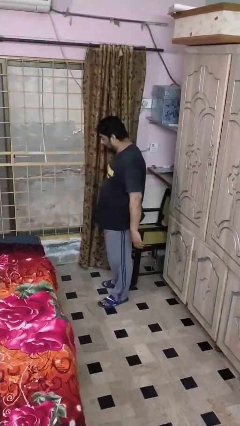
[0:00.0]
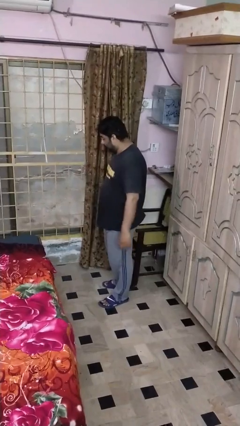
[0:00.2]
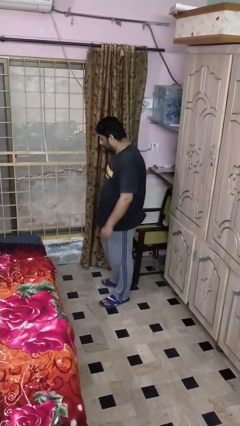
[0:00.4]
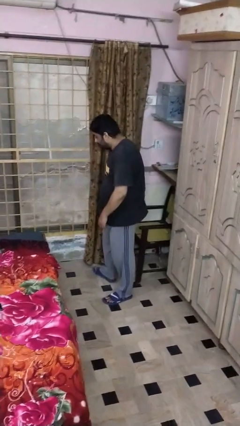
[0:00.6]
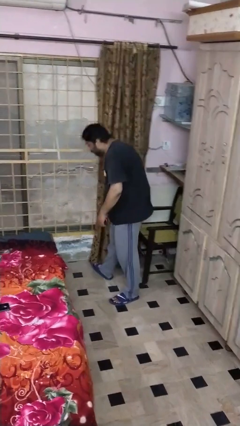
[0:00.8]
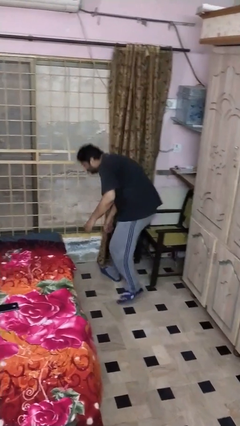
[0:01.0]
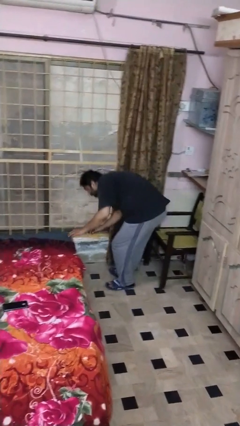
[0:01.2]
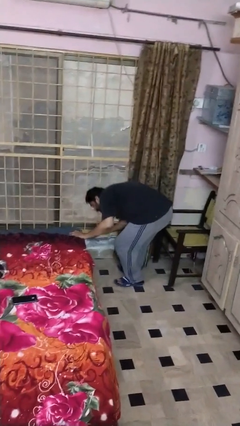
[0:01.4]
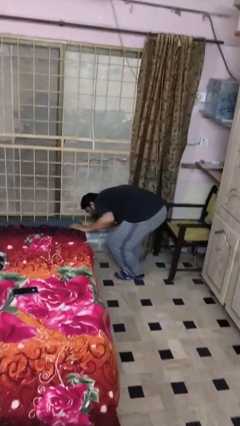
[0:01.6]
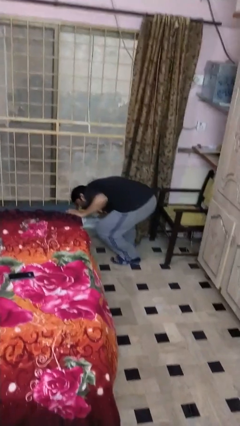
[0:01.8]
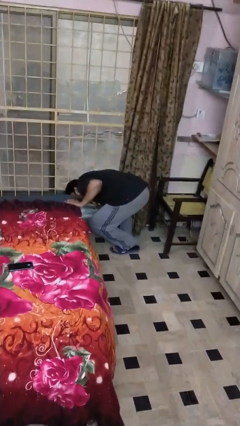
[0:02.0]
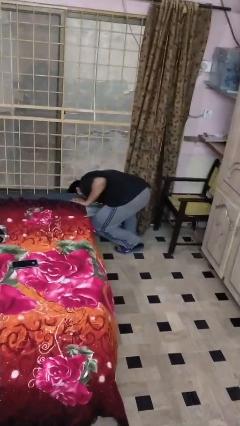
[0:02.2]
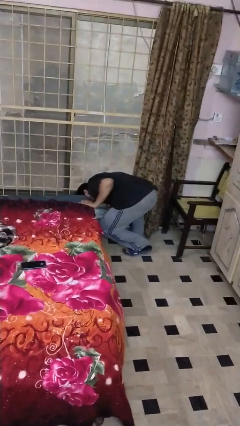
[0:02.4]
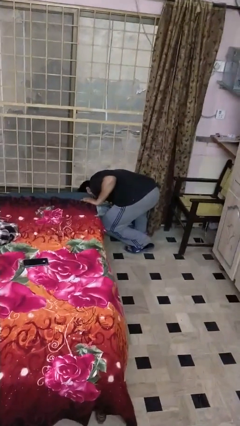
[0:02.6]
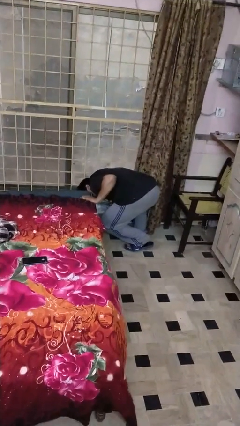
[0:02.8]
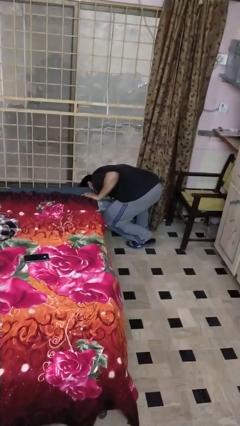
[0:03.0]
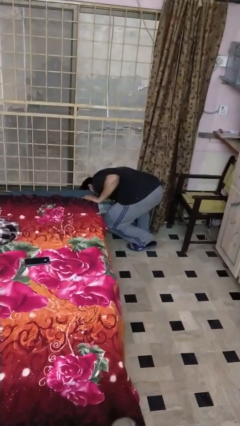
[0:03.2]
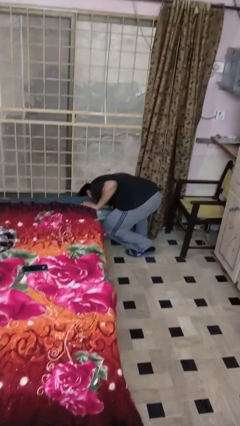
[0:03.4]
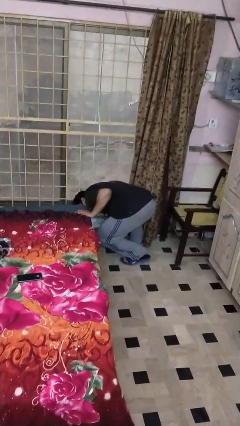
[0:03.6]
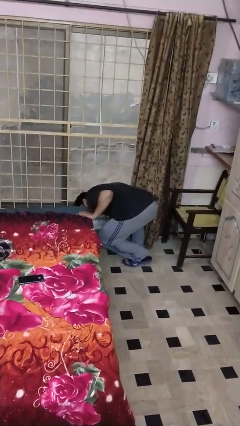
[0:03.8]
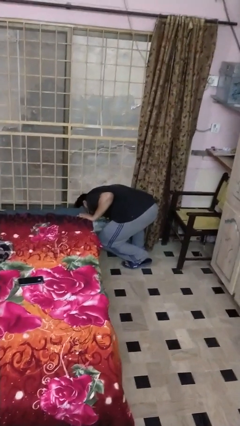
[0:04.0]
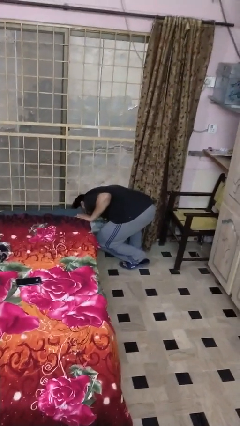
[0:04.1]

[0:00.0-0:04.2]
person searches under bed

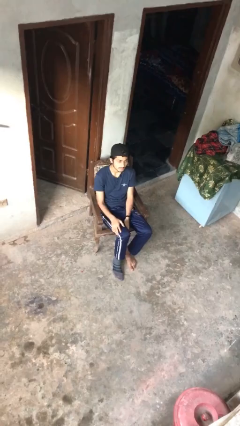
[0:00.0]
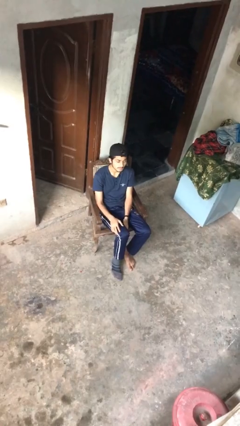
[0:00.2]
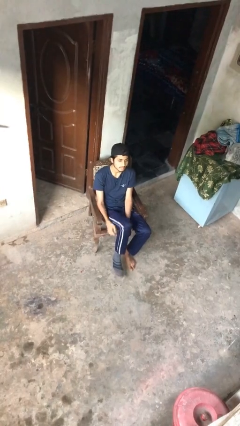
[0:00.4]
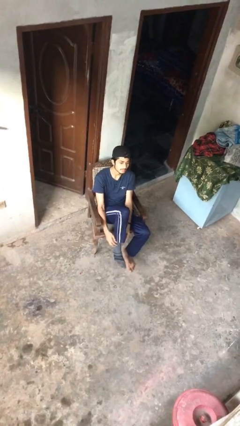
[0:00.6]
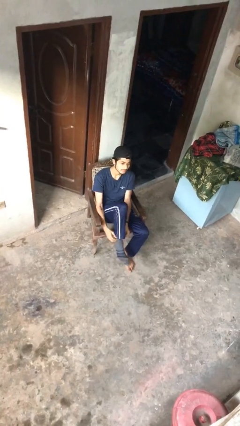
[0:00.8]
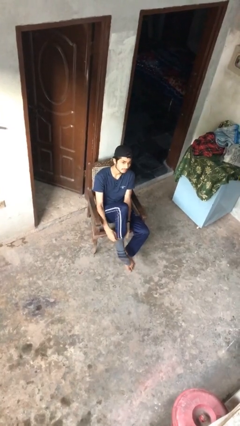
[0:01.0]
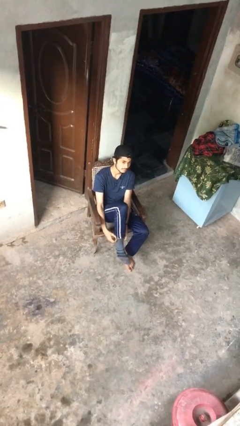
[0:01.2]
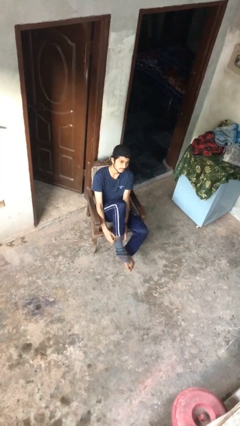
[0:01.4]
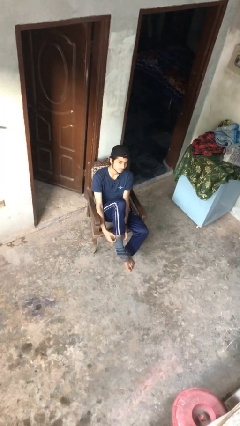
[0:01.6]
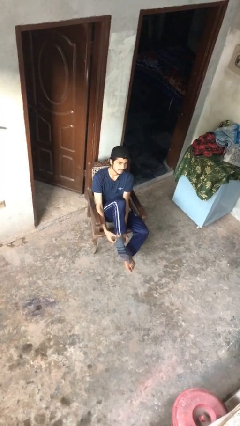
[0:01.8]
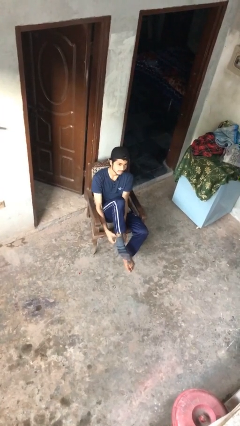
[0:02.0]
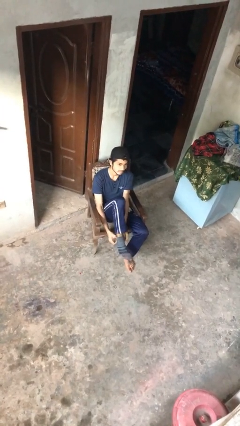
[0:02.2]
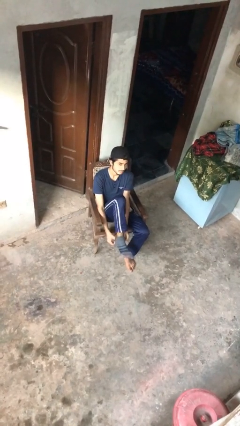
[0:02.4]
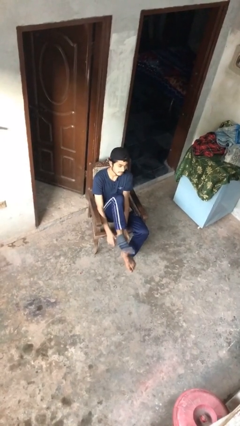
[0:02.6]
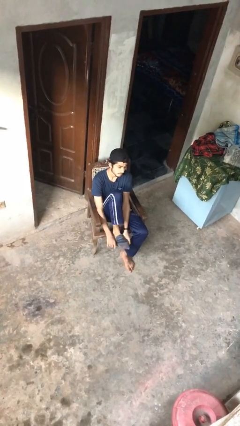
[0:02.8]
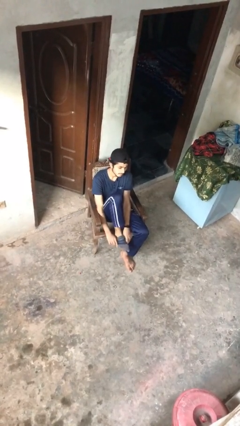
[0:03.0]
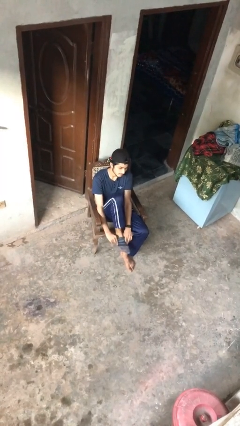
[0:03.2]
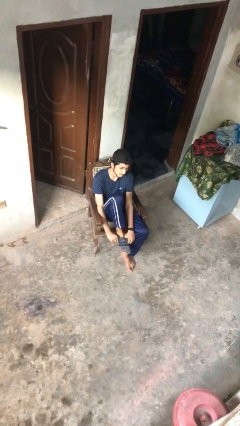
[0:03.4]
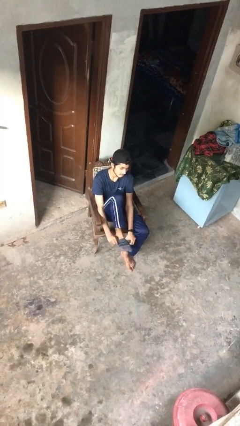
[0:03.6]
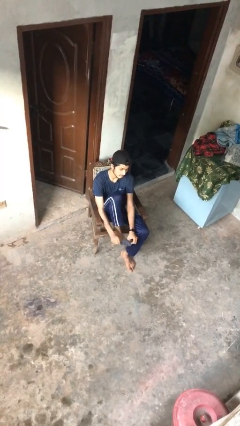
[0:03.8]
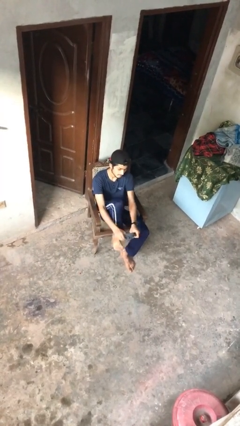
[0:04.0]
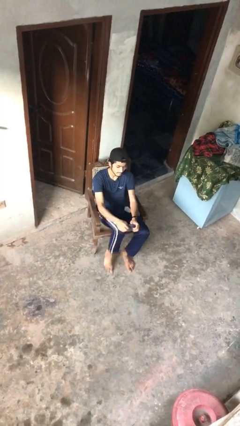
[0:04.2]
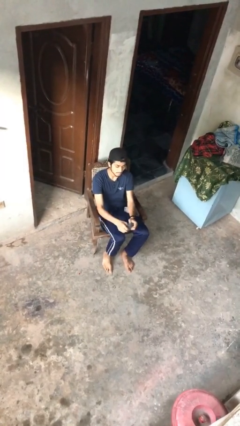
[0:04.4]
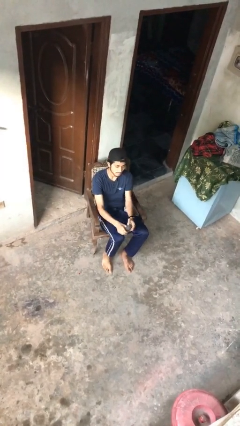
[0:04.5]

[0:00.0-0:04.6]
person takes off socks

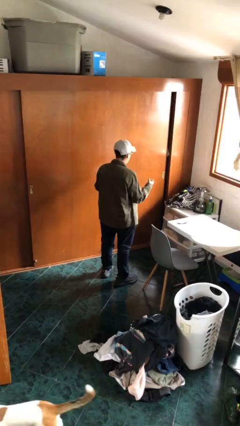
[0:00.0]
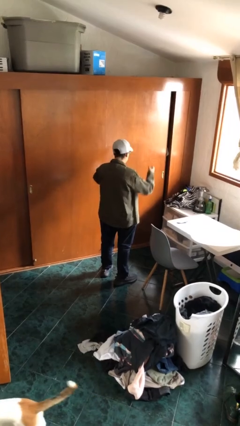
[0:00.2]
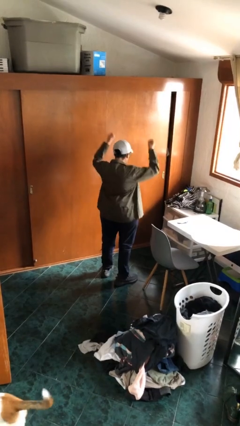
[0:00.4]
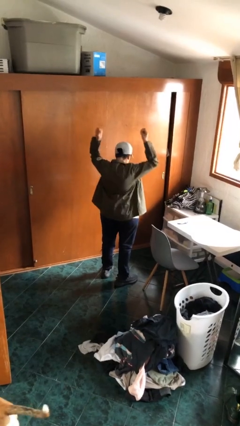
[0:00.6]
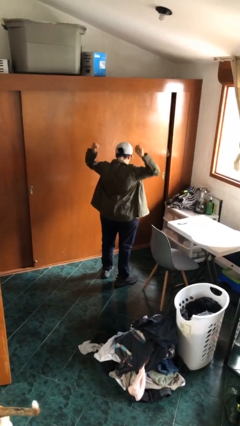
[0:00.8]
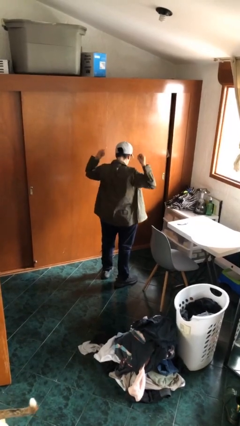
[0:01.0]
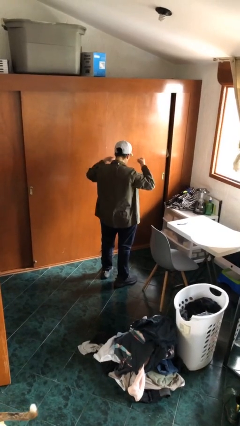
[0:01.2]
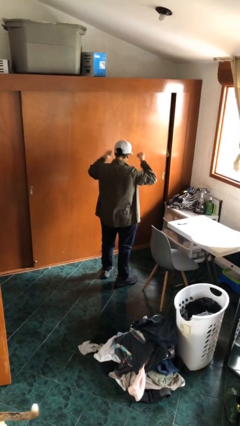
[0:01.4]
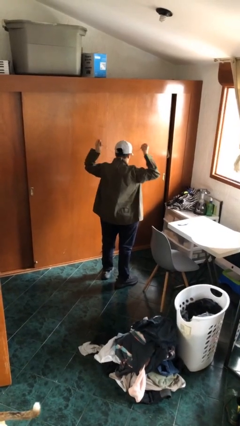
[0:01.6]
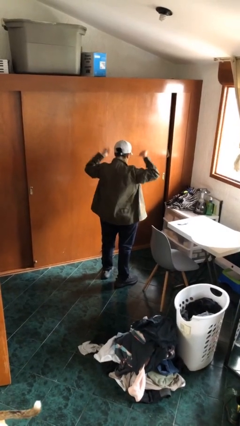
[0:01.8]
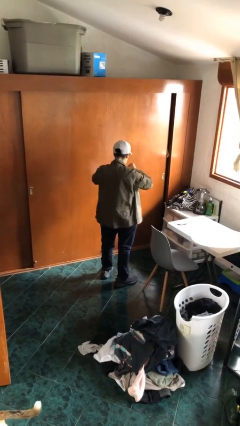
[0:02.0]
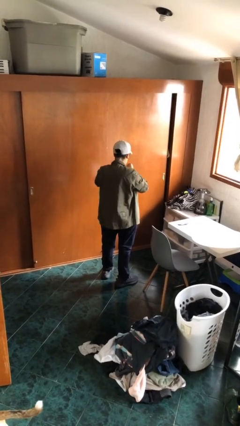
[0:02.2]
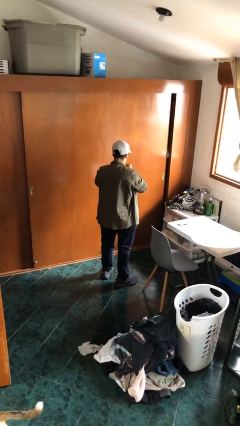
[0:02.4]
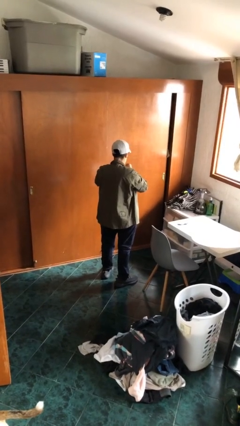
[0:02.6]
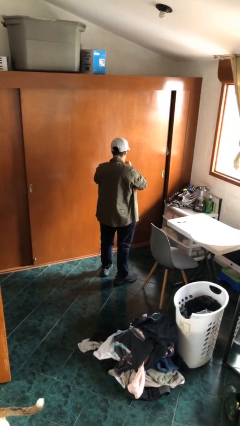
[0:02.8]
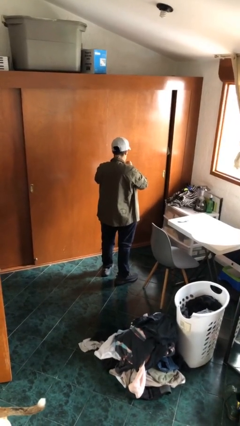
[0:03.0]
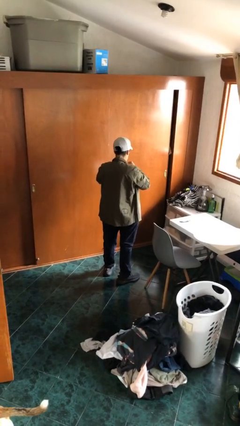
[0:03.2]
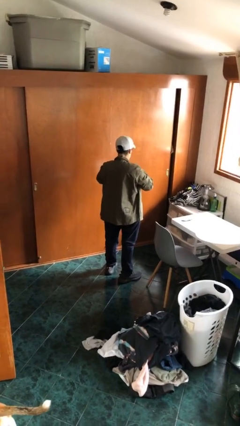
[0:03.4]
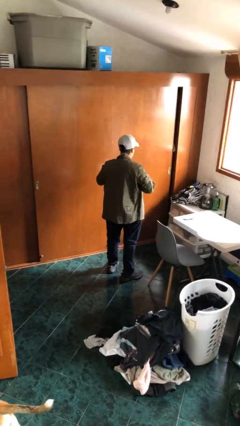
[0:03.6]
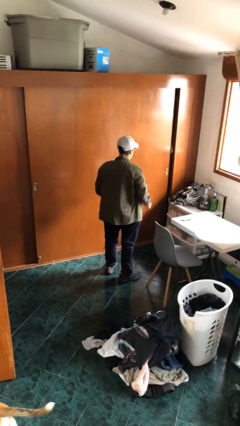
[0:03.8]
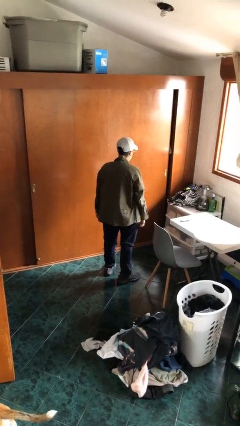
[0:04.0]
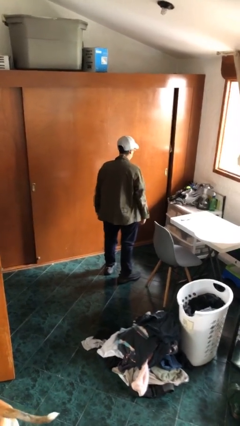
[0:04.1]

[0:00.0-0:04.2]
person puts on necklace

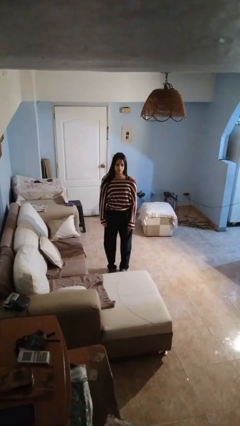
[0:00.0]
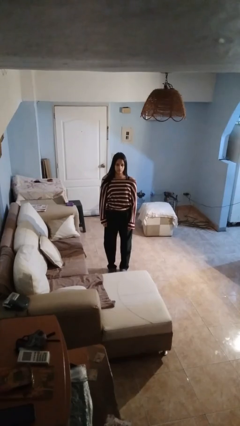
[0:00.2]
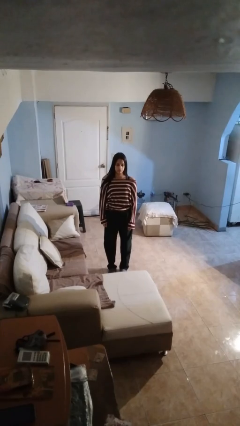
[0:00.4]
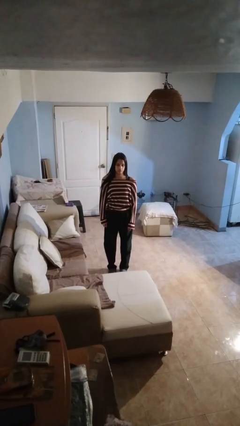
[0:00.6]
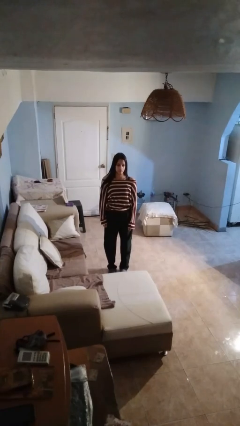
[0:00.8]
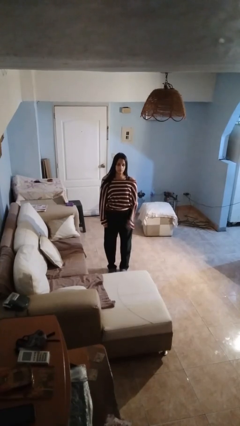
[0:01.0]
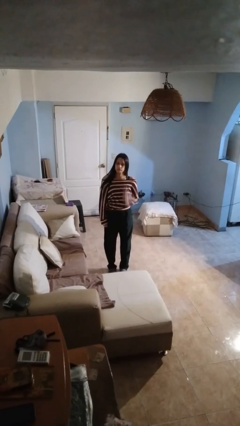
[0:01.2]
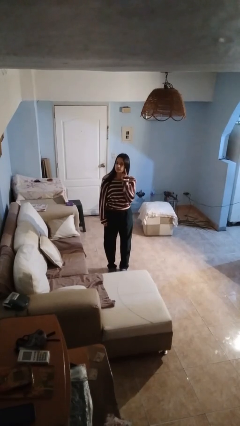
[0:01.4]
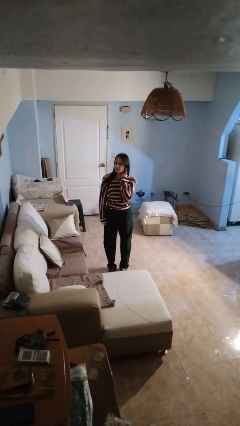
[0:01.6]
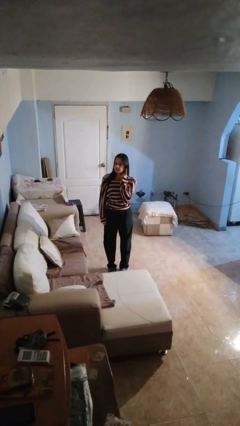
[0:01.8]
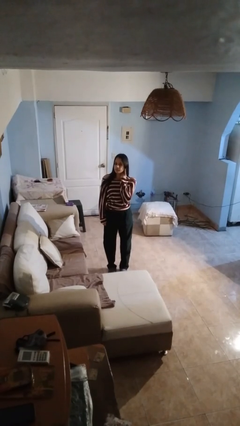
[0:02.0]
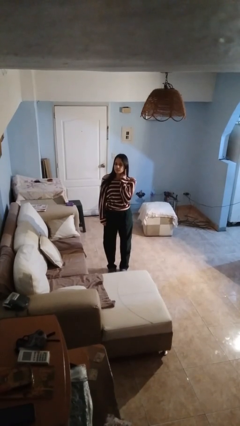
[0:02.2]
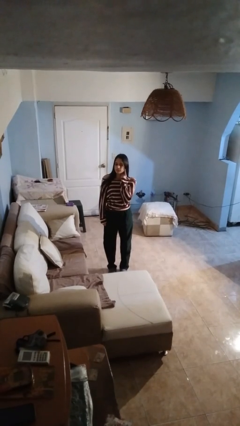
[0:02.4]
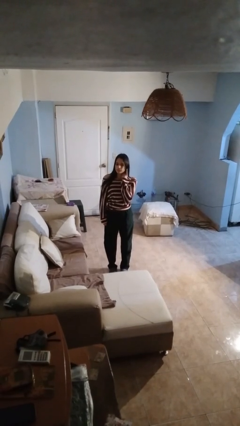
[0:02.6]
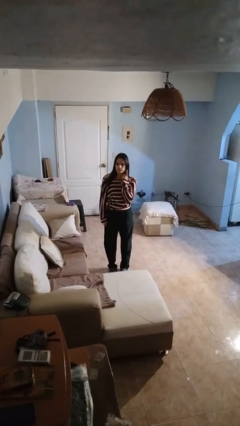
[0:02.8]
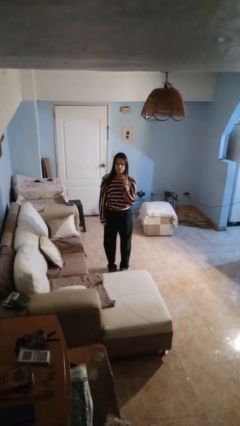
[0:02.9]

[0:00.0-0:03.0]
person gestures listen closely

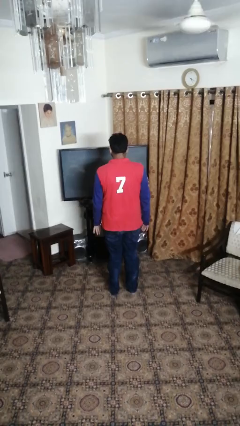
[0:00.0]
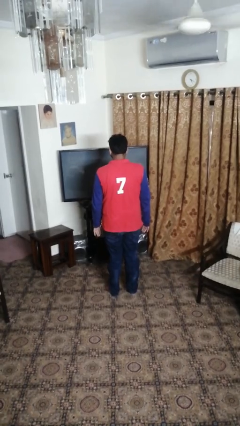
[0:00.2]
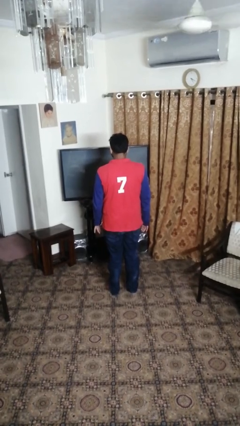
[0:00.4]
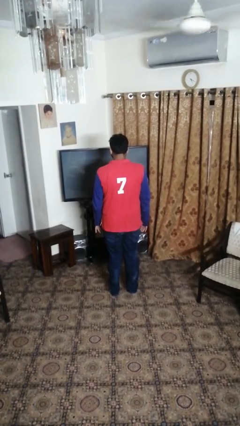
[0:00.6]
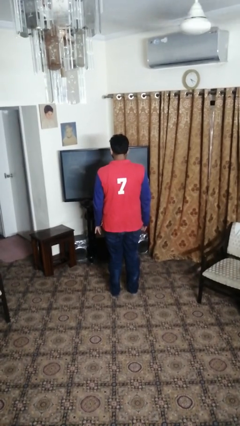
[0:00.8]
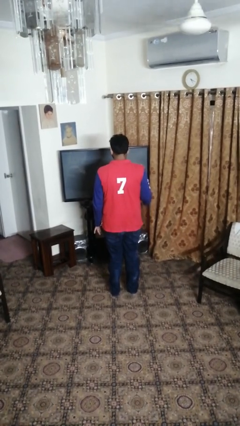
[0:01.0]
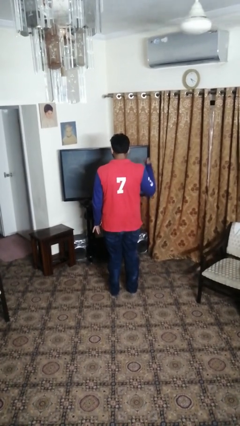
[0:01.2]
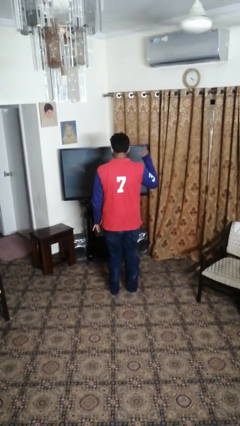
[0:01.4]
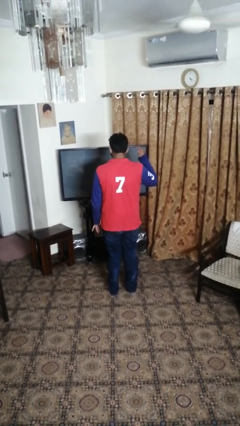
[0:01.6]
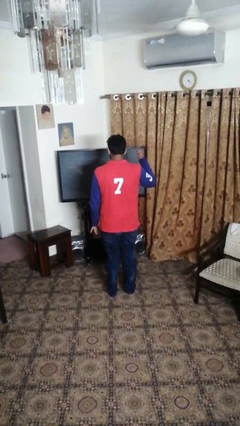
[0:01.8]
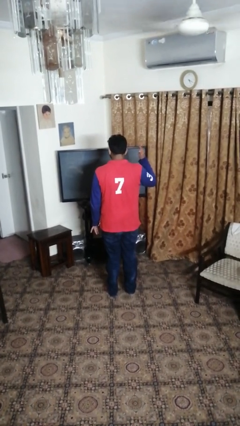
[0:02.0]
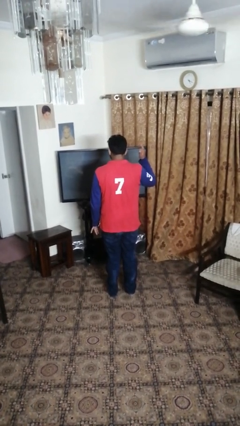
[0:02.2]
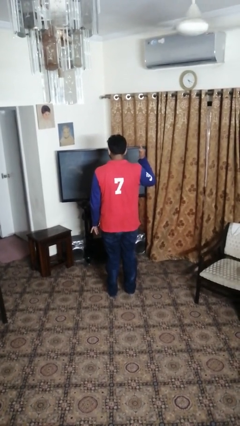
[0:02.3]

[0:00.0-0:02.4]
person gestures hang loose
